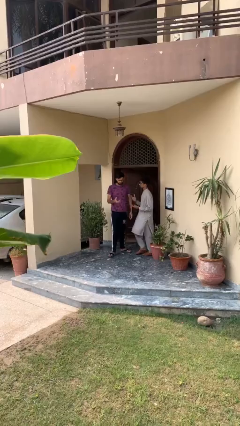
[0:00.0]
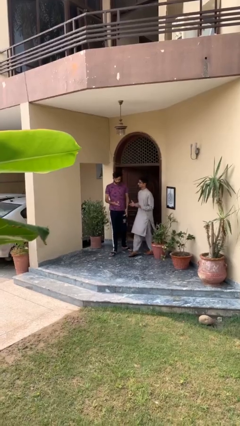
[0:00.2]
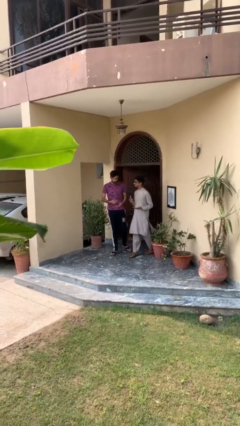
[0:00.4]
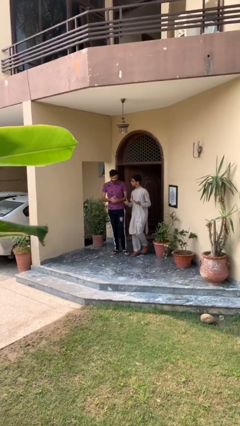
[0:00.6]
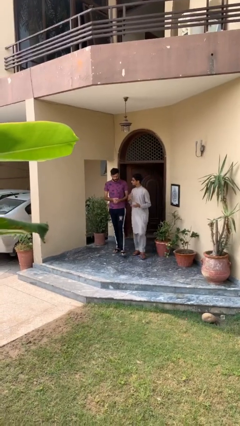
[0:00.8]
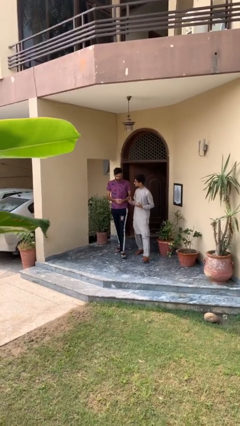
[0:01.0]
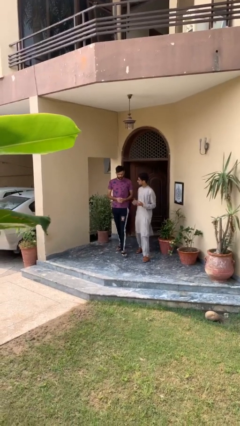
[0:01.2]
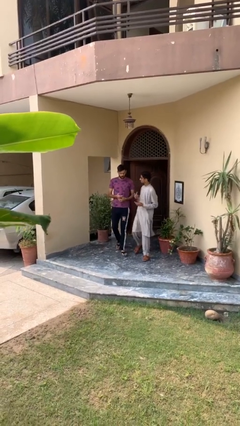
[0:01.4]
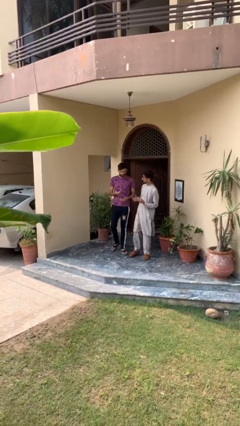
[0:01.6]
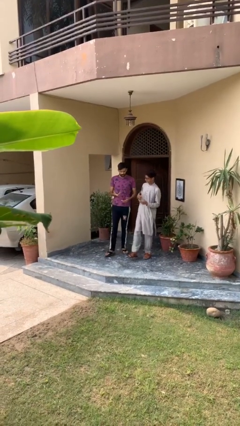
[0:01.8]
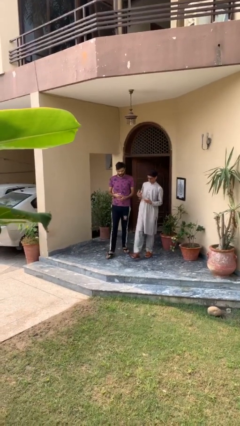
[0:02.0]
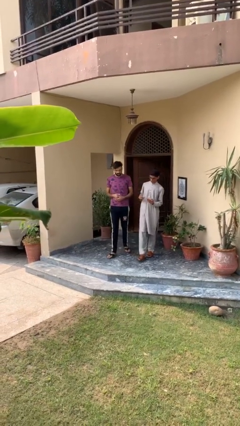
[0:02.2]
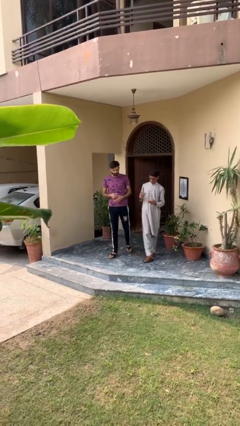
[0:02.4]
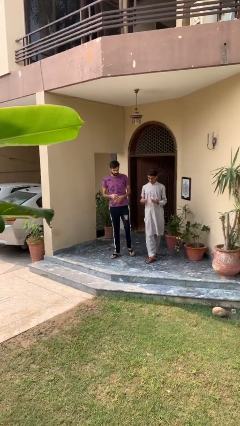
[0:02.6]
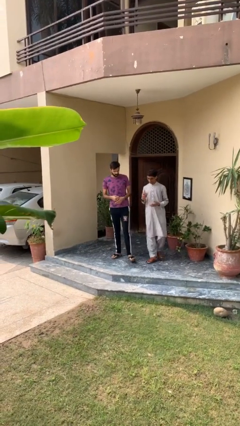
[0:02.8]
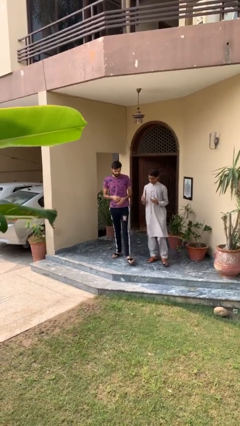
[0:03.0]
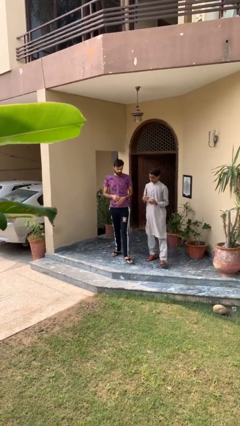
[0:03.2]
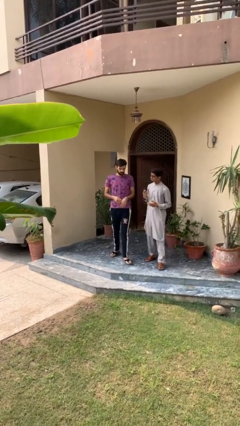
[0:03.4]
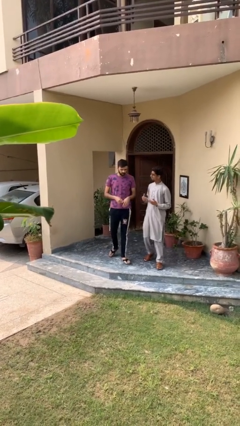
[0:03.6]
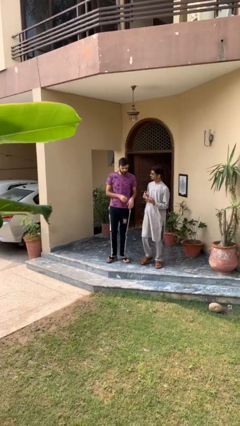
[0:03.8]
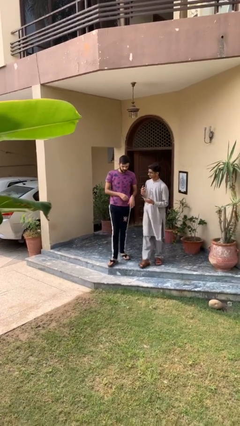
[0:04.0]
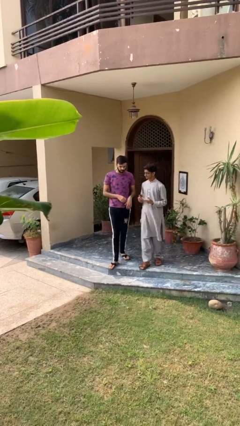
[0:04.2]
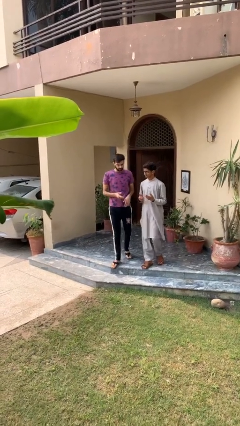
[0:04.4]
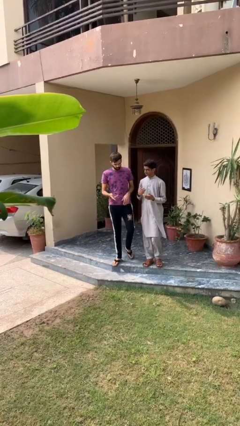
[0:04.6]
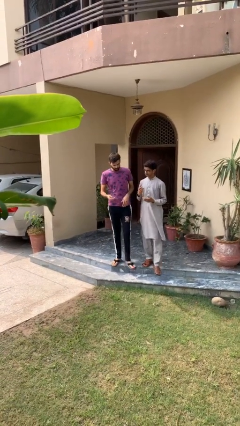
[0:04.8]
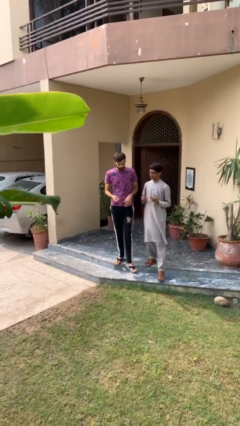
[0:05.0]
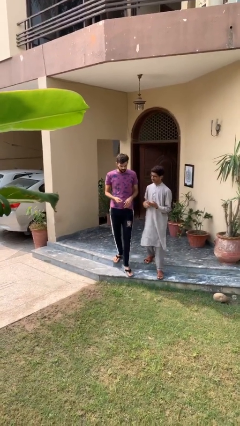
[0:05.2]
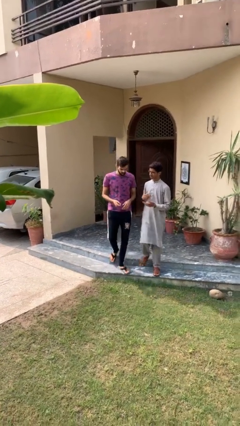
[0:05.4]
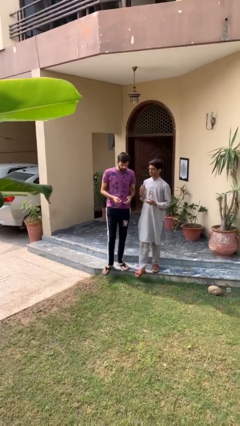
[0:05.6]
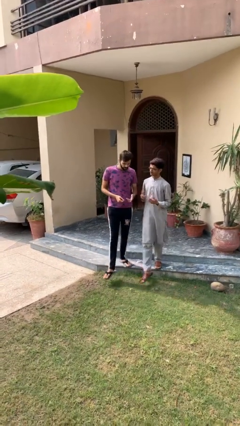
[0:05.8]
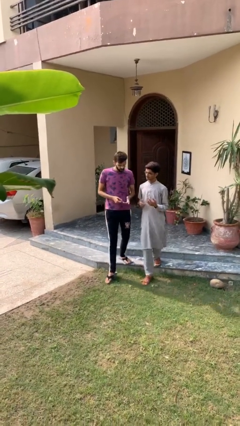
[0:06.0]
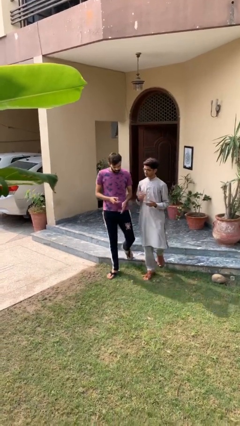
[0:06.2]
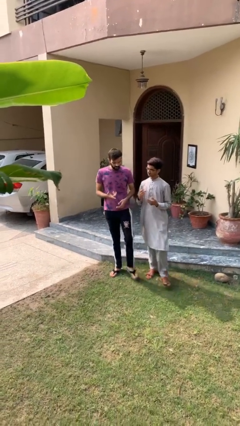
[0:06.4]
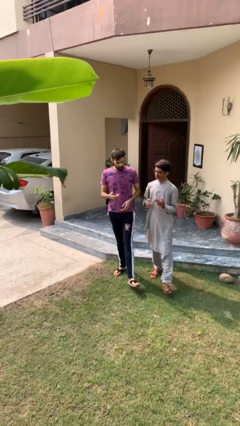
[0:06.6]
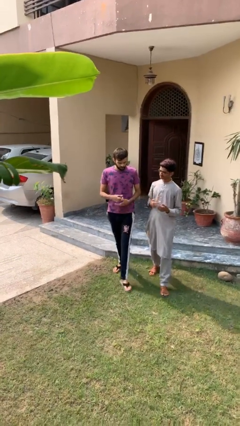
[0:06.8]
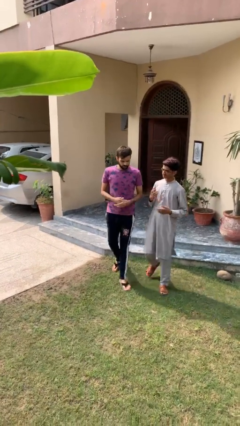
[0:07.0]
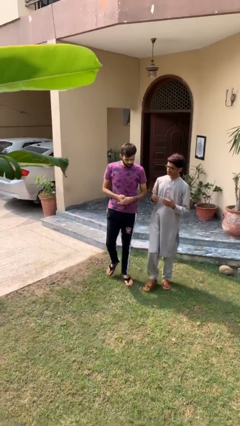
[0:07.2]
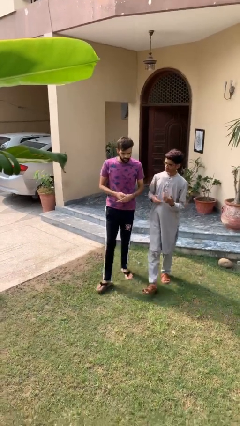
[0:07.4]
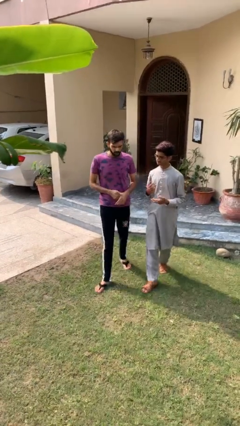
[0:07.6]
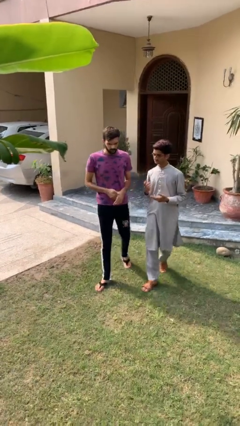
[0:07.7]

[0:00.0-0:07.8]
person talks to person

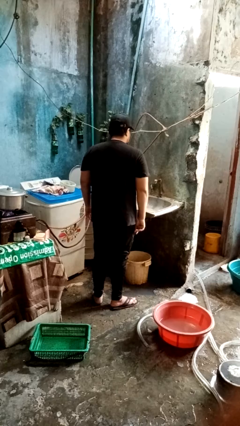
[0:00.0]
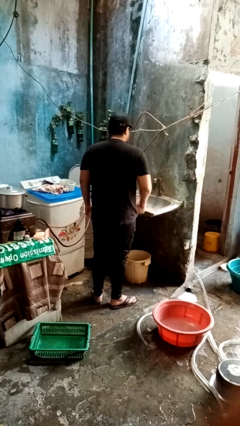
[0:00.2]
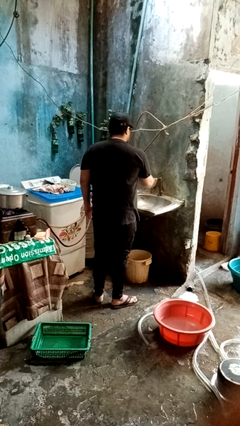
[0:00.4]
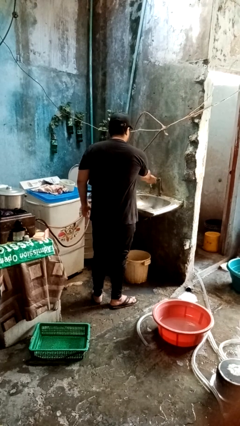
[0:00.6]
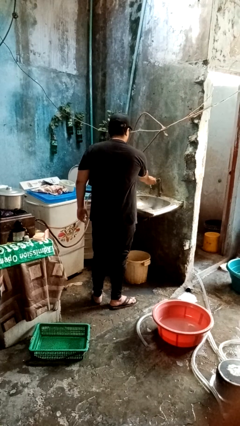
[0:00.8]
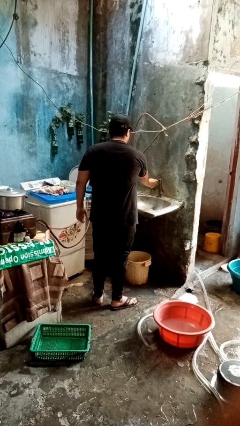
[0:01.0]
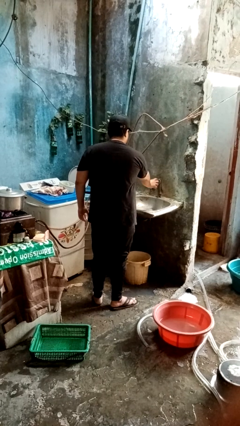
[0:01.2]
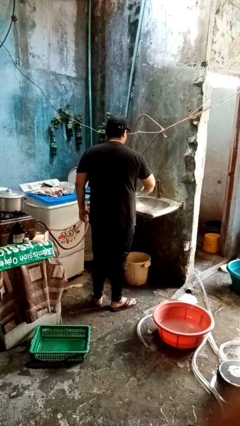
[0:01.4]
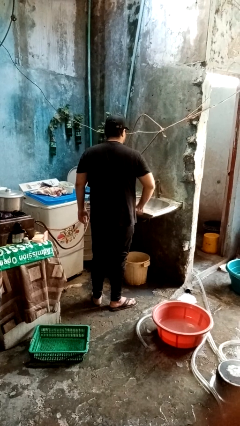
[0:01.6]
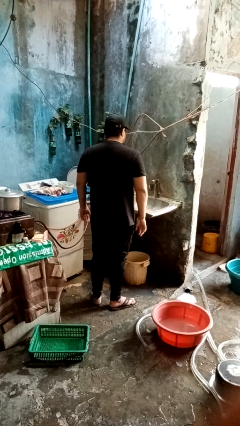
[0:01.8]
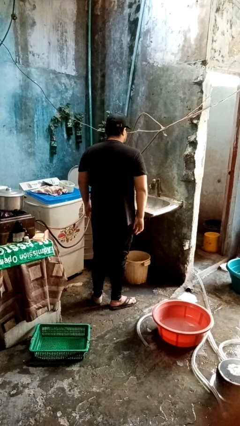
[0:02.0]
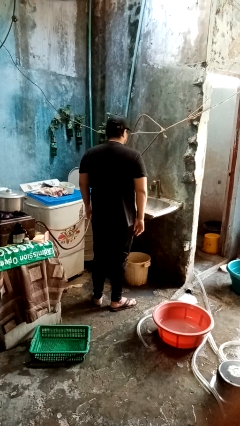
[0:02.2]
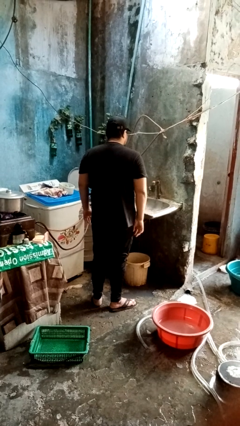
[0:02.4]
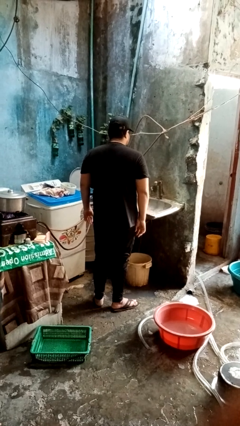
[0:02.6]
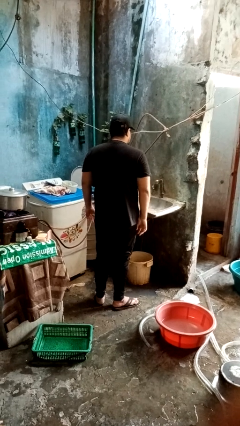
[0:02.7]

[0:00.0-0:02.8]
person turns on faucet

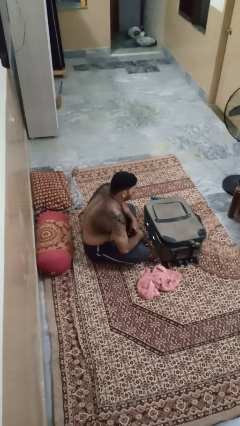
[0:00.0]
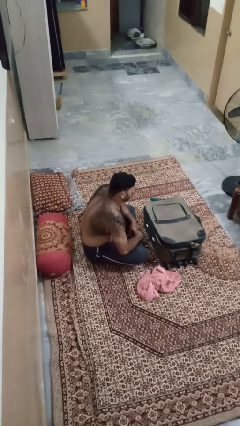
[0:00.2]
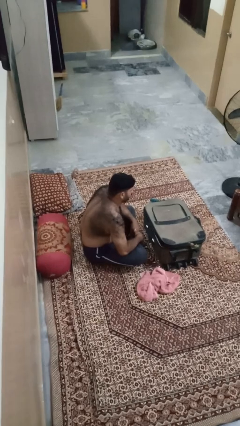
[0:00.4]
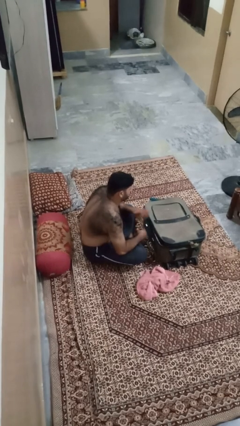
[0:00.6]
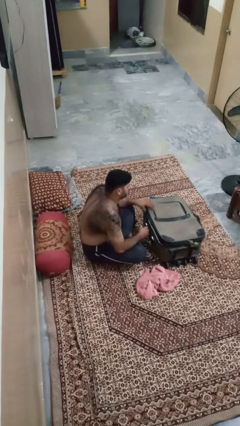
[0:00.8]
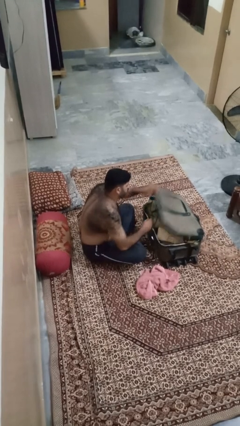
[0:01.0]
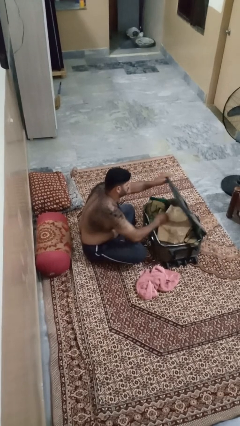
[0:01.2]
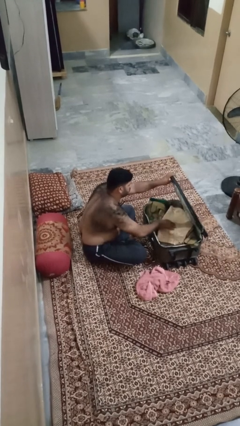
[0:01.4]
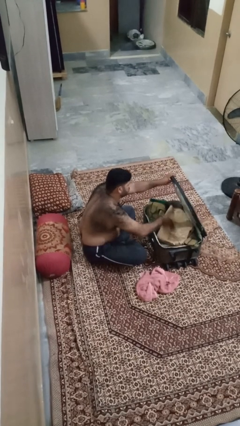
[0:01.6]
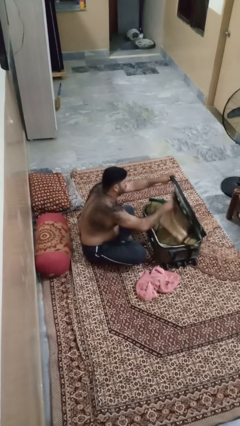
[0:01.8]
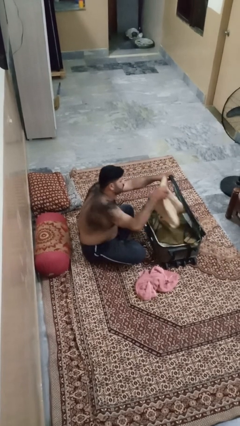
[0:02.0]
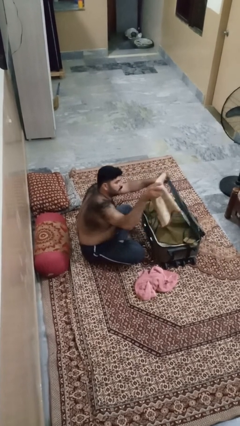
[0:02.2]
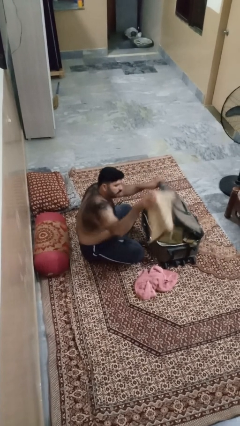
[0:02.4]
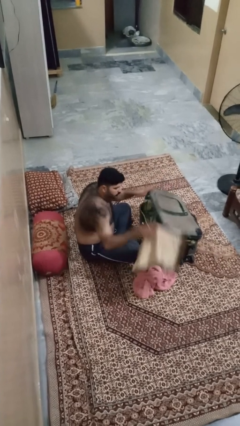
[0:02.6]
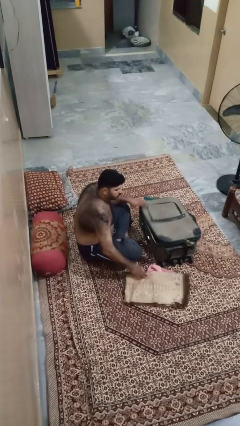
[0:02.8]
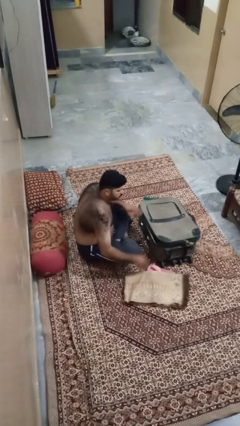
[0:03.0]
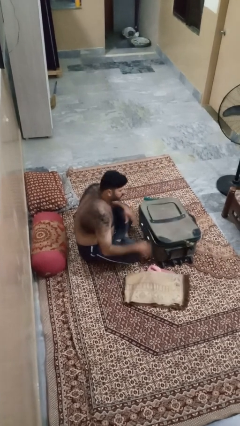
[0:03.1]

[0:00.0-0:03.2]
person unloads clothes from suitcase

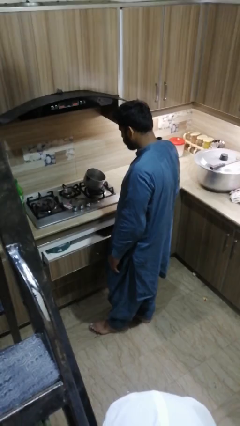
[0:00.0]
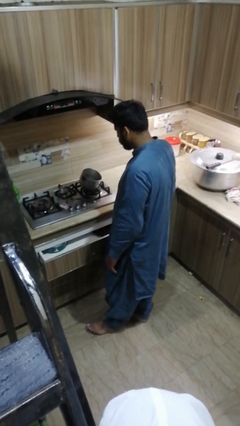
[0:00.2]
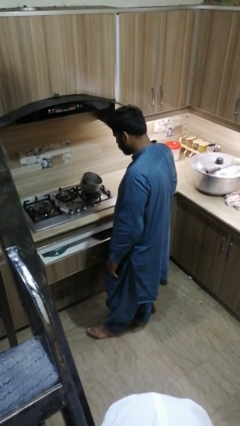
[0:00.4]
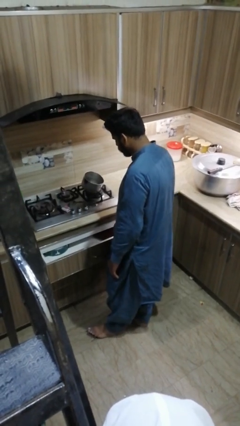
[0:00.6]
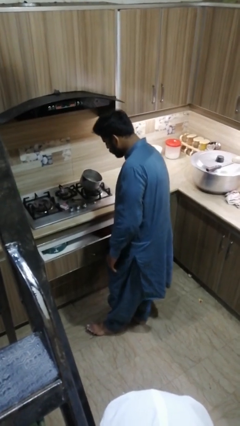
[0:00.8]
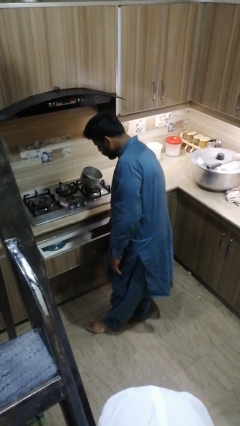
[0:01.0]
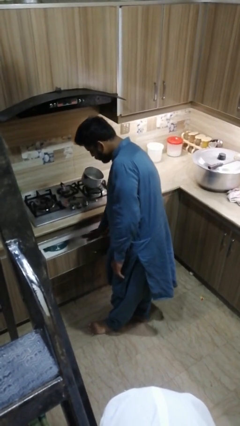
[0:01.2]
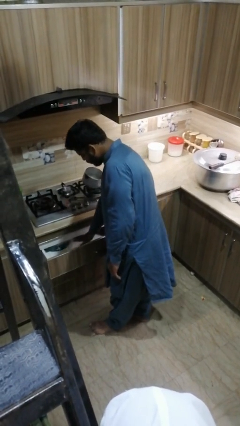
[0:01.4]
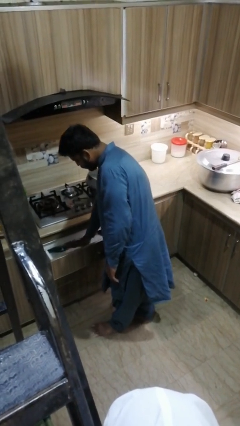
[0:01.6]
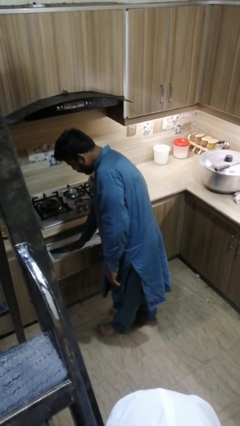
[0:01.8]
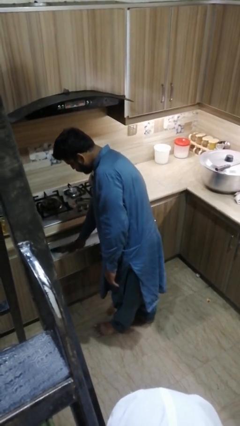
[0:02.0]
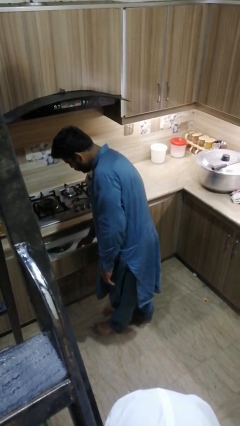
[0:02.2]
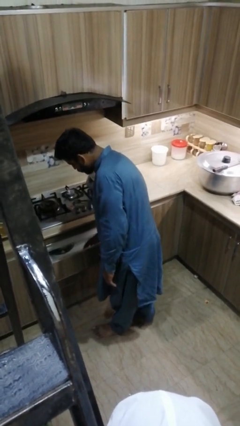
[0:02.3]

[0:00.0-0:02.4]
person searches in kitchen drawer

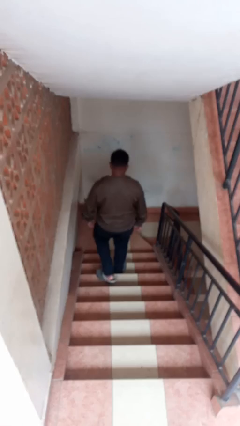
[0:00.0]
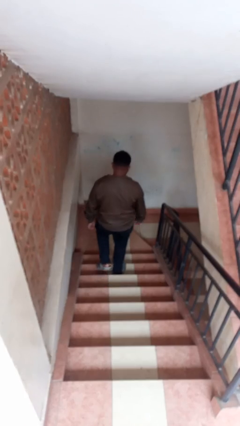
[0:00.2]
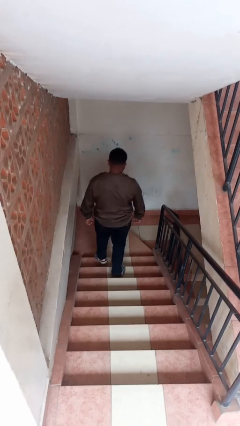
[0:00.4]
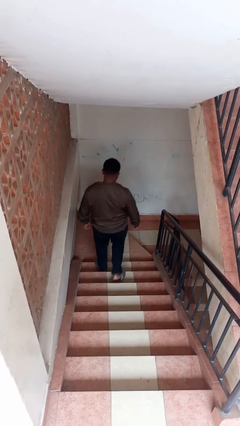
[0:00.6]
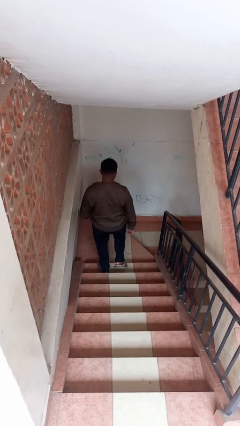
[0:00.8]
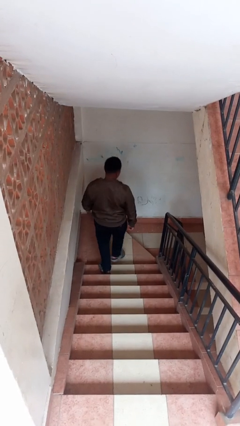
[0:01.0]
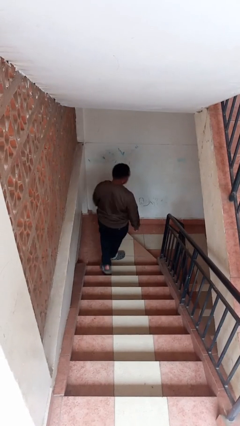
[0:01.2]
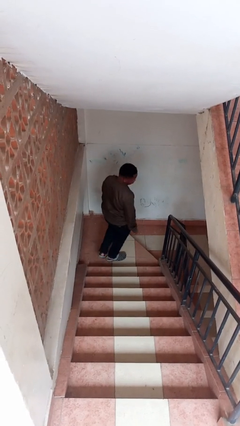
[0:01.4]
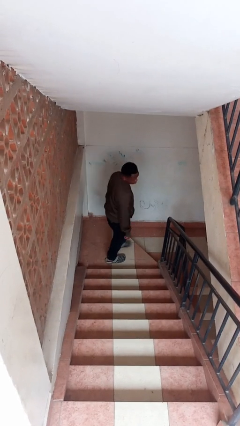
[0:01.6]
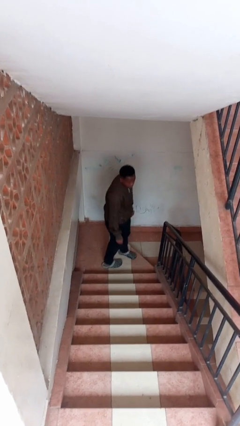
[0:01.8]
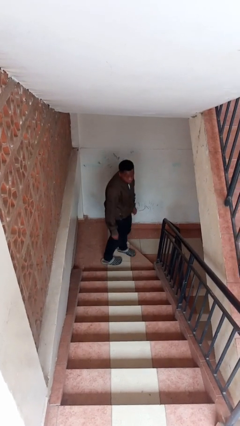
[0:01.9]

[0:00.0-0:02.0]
person climbs down stairs
